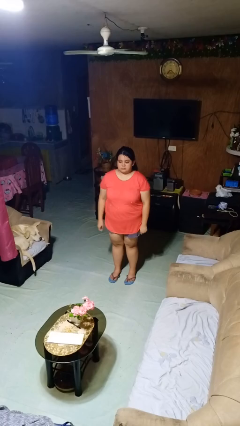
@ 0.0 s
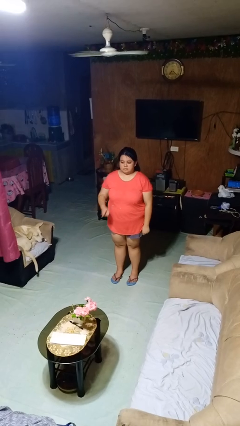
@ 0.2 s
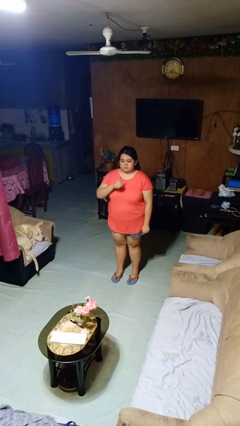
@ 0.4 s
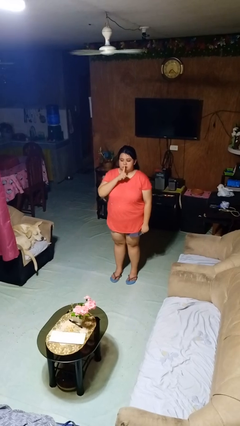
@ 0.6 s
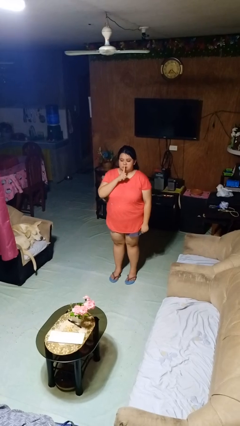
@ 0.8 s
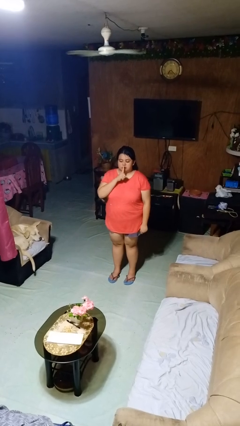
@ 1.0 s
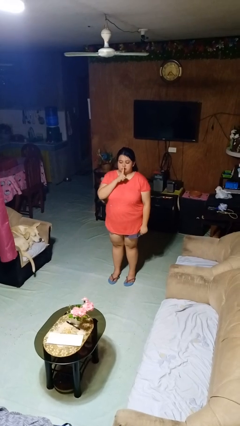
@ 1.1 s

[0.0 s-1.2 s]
person gestures be quiet

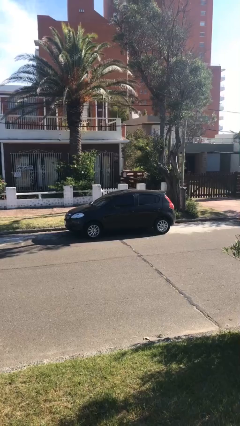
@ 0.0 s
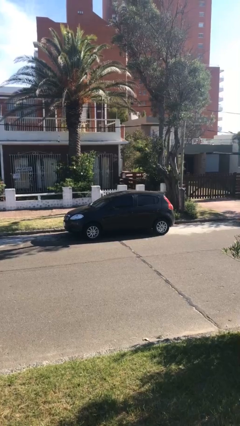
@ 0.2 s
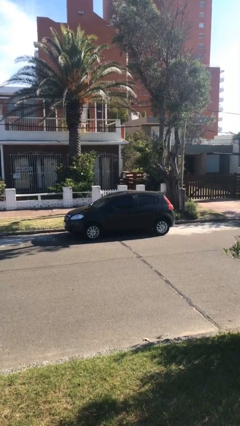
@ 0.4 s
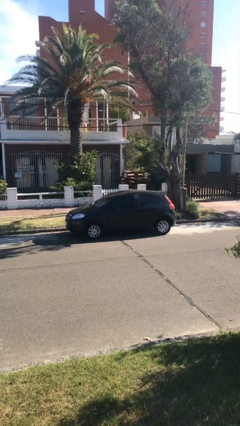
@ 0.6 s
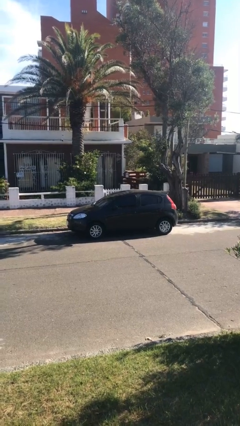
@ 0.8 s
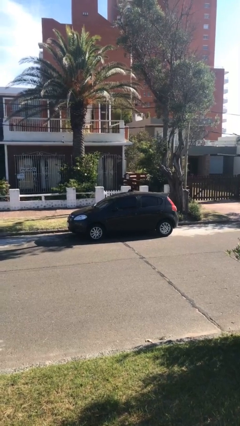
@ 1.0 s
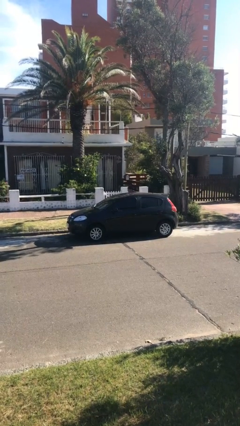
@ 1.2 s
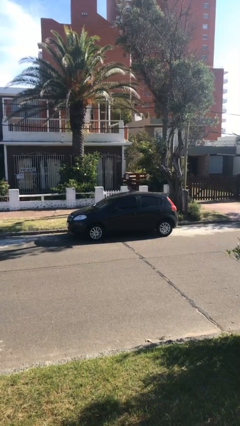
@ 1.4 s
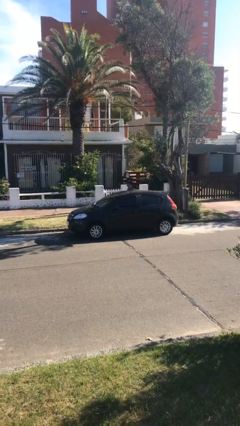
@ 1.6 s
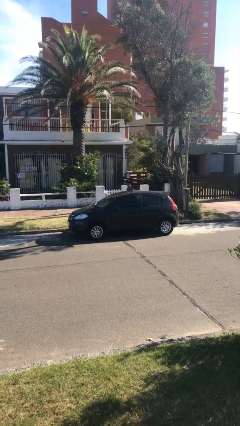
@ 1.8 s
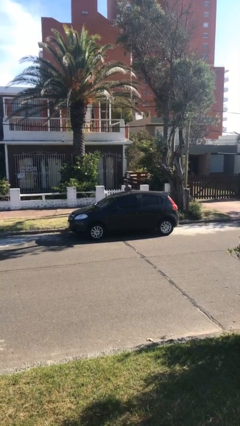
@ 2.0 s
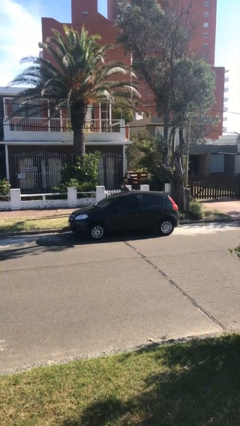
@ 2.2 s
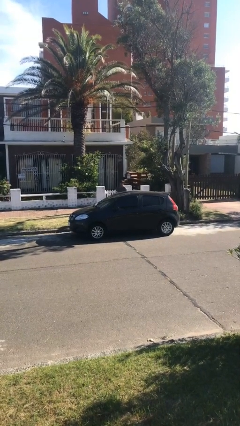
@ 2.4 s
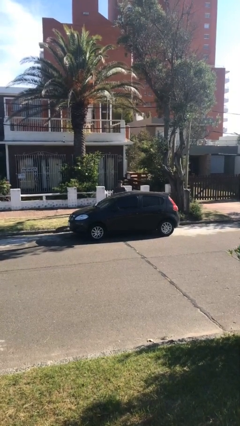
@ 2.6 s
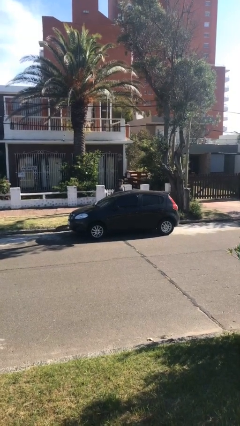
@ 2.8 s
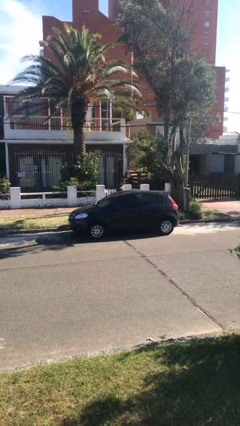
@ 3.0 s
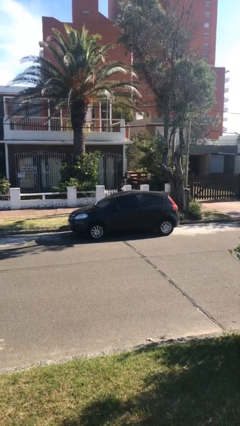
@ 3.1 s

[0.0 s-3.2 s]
car drops off person

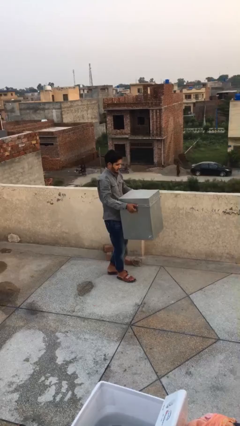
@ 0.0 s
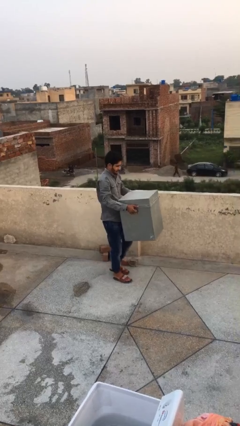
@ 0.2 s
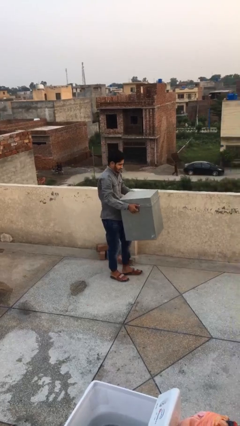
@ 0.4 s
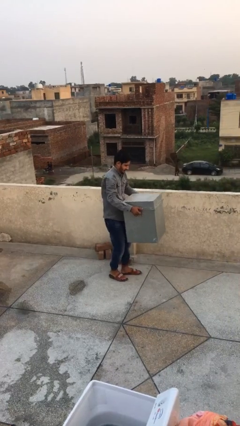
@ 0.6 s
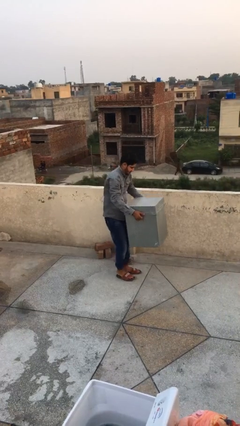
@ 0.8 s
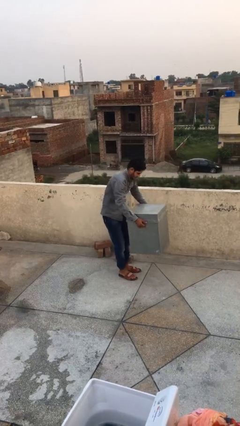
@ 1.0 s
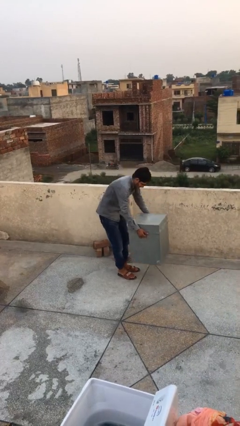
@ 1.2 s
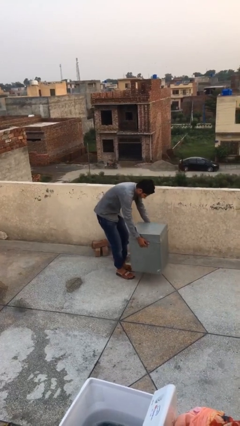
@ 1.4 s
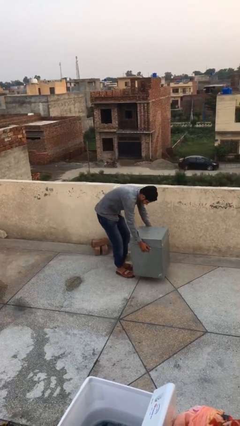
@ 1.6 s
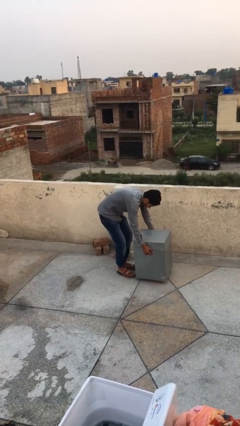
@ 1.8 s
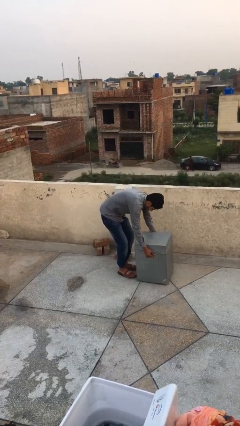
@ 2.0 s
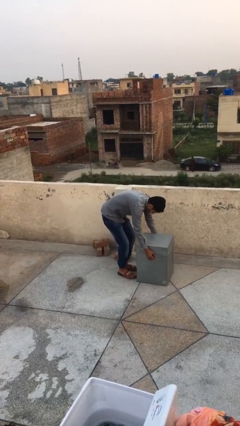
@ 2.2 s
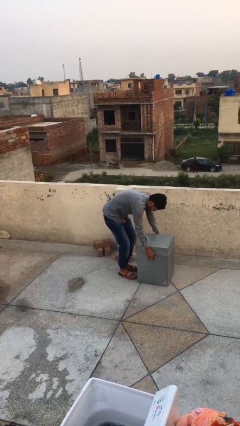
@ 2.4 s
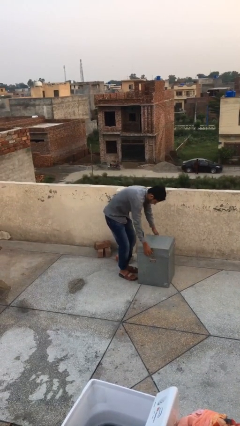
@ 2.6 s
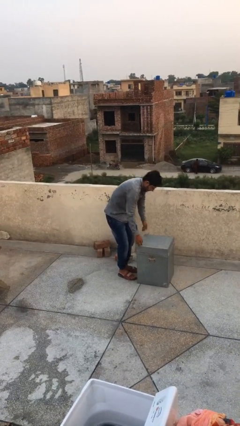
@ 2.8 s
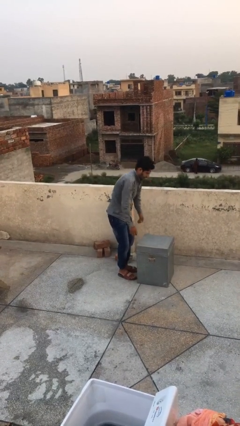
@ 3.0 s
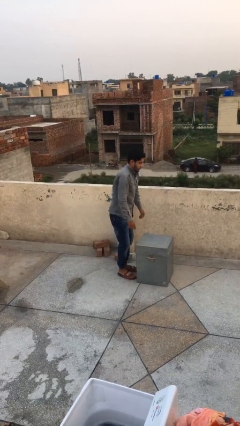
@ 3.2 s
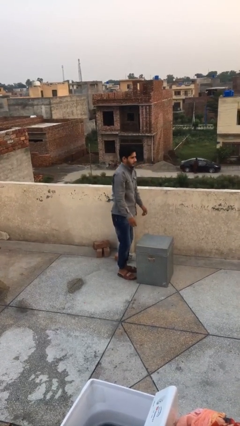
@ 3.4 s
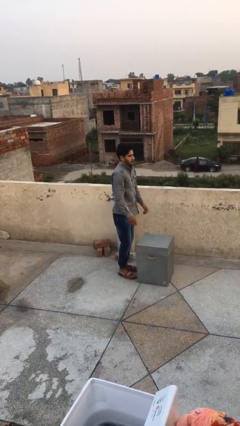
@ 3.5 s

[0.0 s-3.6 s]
person puts down object on floor

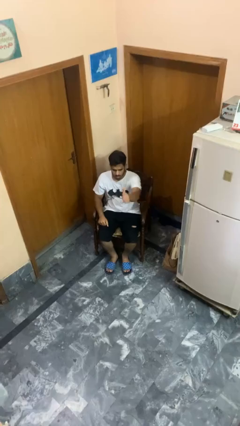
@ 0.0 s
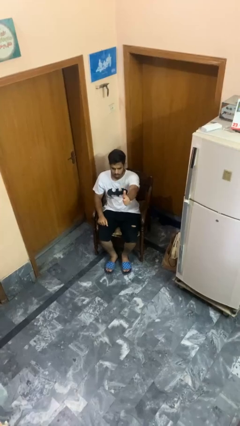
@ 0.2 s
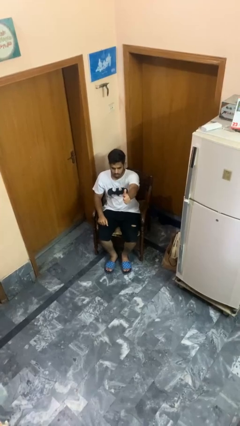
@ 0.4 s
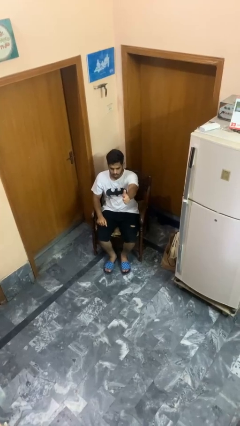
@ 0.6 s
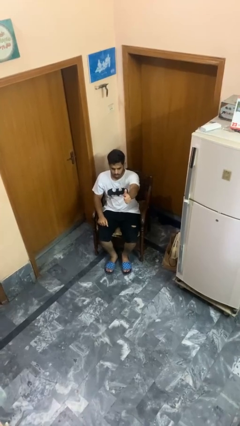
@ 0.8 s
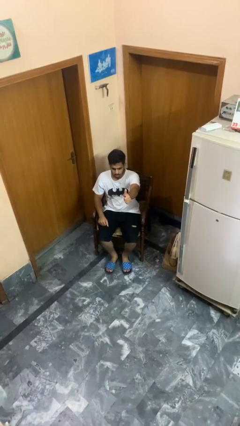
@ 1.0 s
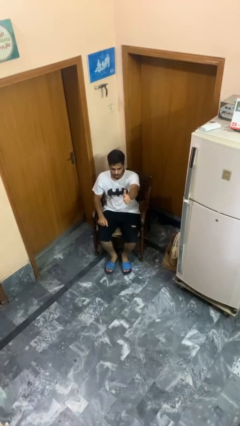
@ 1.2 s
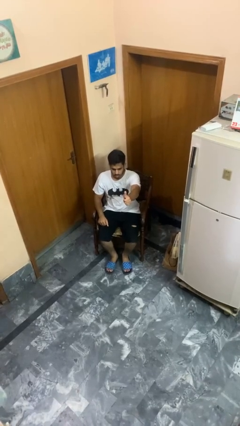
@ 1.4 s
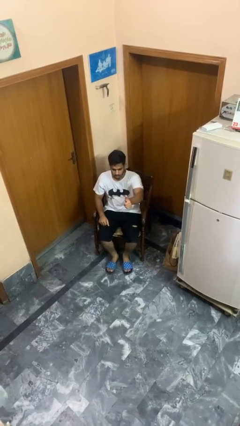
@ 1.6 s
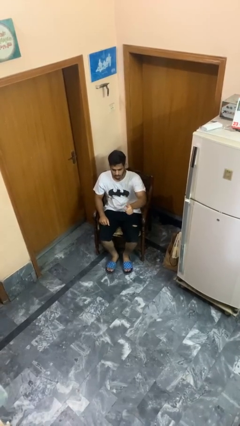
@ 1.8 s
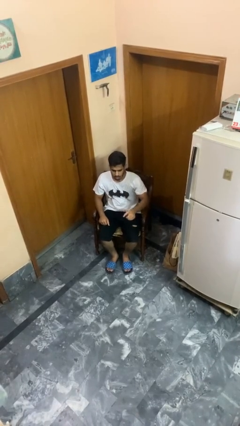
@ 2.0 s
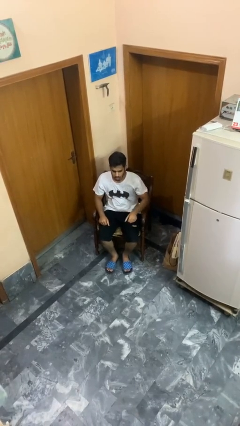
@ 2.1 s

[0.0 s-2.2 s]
person gestures thumbs up

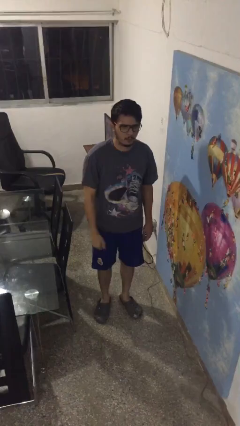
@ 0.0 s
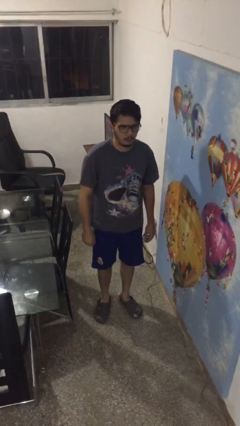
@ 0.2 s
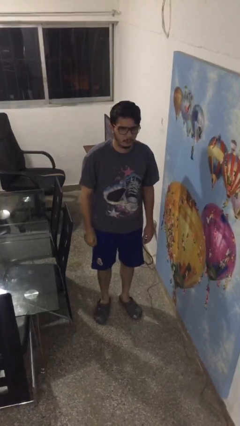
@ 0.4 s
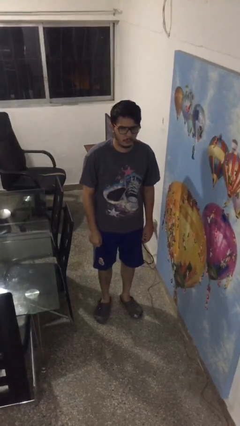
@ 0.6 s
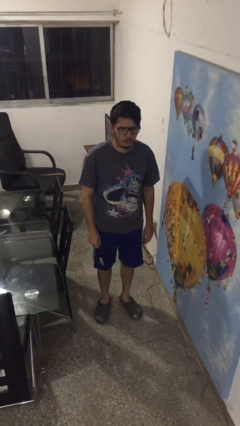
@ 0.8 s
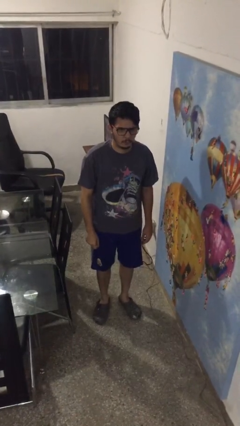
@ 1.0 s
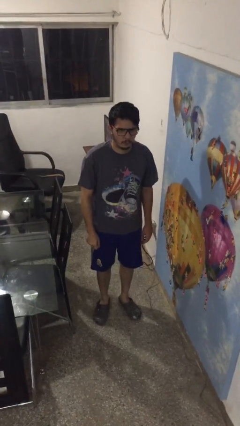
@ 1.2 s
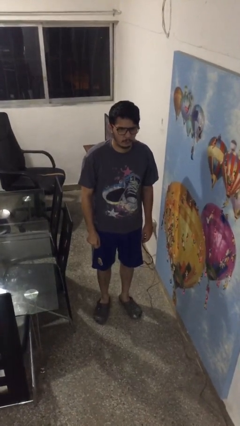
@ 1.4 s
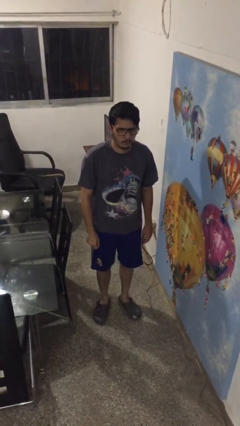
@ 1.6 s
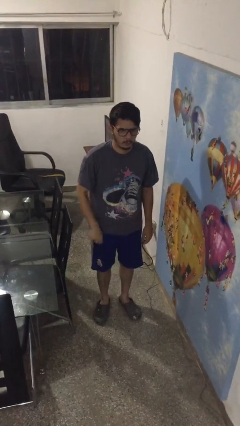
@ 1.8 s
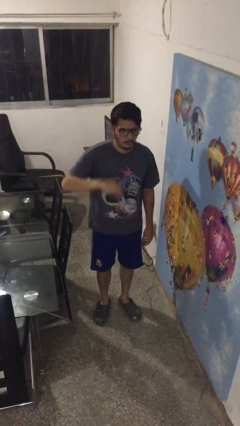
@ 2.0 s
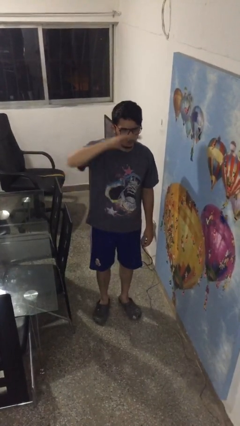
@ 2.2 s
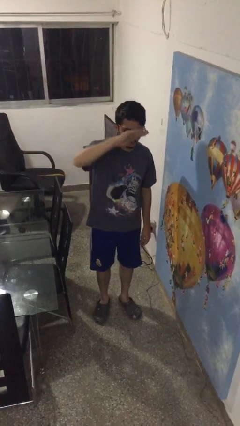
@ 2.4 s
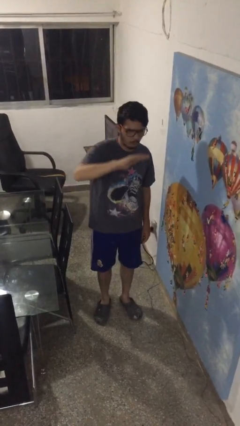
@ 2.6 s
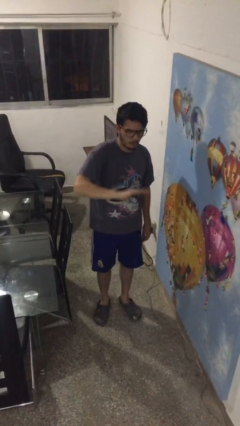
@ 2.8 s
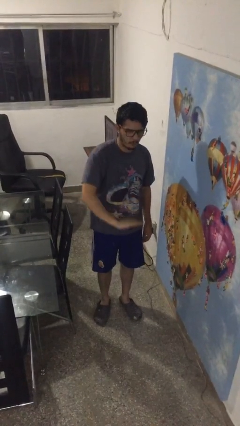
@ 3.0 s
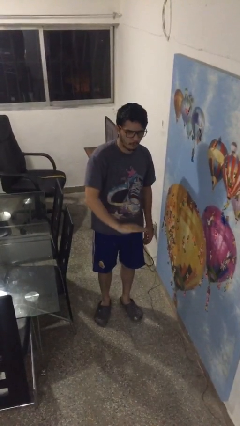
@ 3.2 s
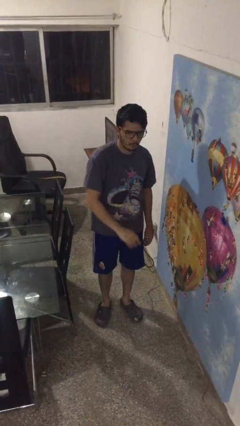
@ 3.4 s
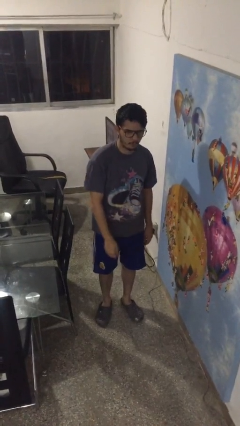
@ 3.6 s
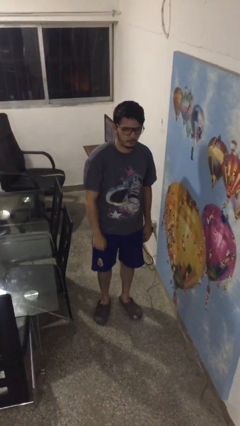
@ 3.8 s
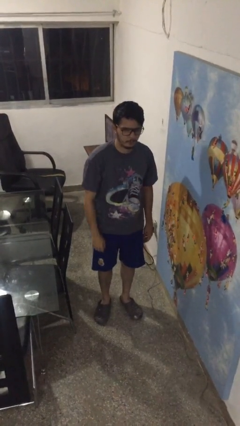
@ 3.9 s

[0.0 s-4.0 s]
person gestures swipe down

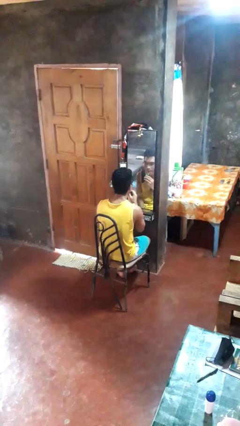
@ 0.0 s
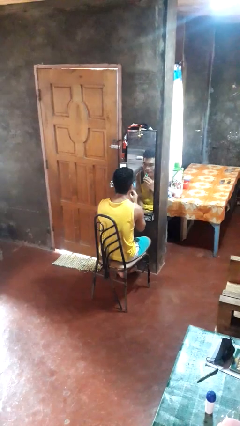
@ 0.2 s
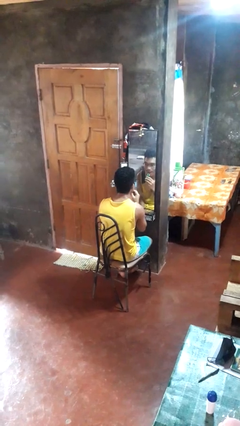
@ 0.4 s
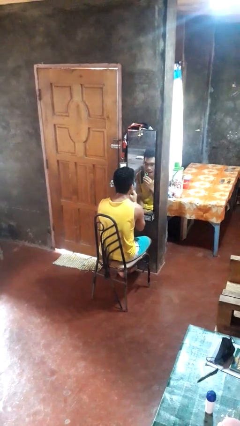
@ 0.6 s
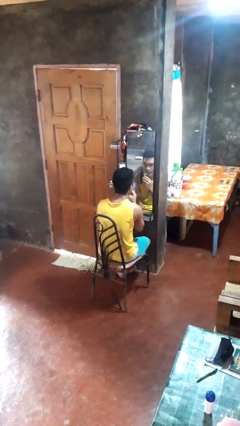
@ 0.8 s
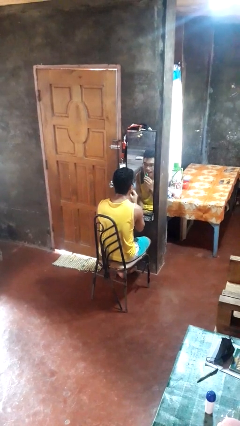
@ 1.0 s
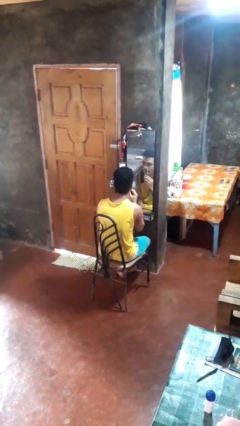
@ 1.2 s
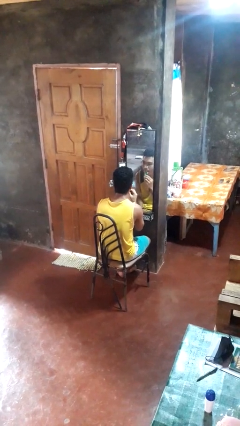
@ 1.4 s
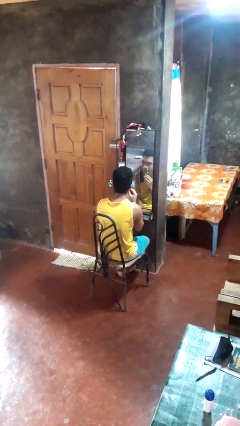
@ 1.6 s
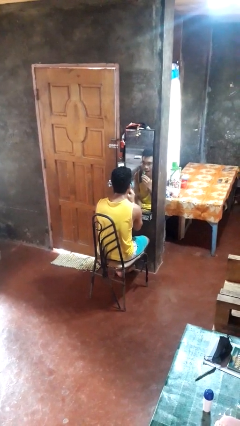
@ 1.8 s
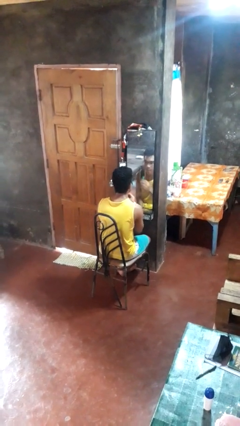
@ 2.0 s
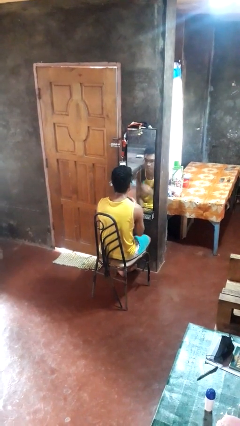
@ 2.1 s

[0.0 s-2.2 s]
person applies lip makeup

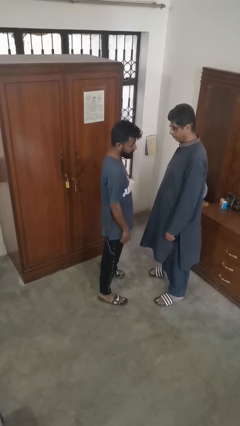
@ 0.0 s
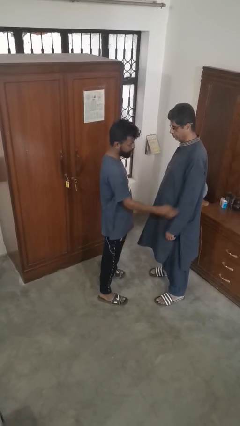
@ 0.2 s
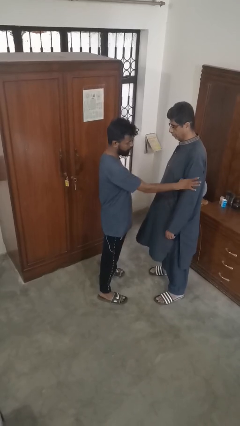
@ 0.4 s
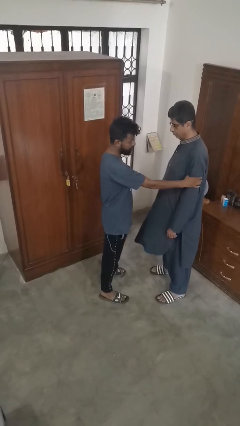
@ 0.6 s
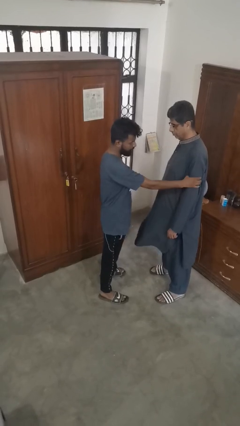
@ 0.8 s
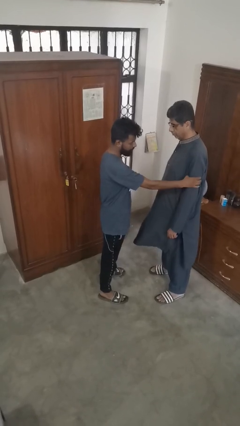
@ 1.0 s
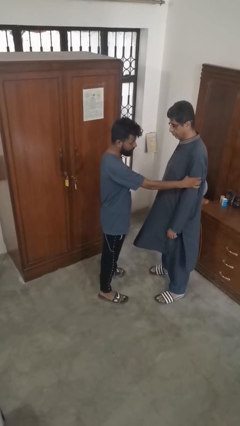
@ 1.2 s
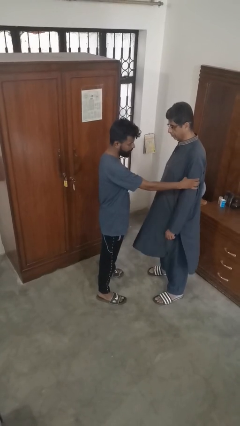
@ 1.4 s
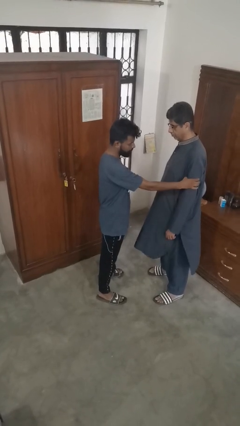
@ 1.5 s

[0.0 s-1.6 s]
person grabs person by bicep
